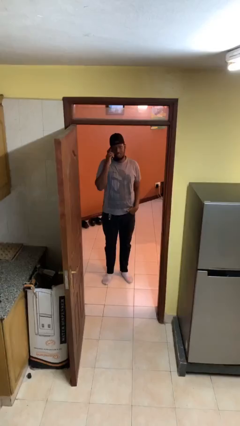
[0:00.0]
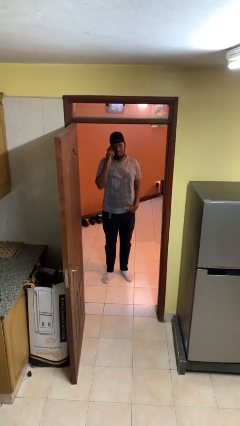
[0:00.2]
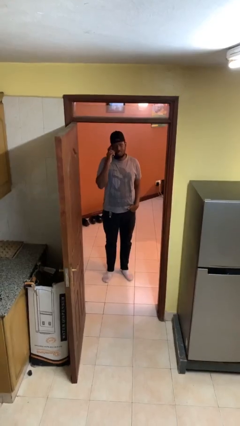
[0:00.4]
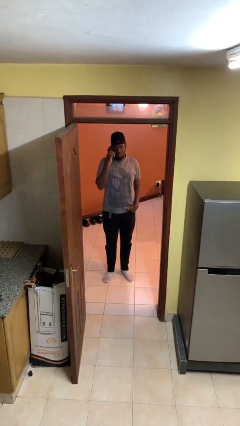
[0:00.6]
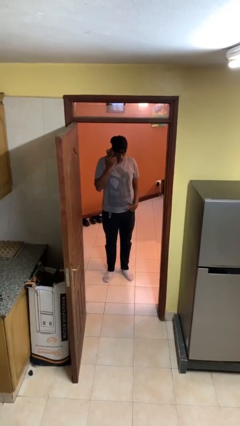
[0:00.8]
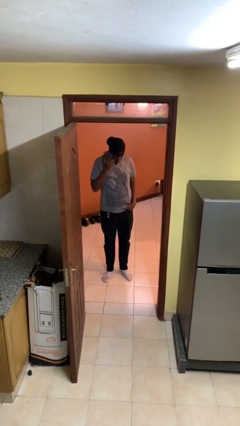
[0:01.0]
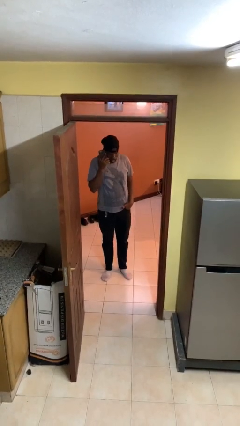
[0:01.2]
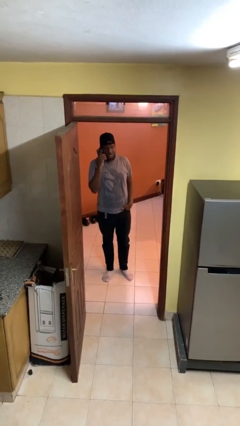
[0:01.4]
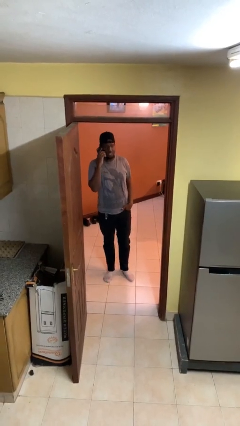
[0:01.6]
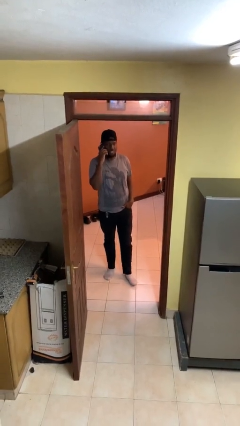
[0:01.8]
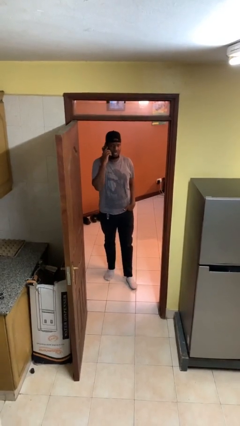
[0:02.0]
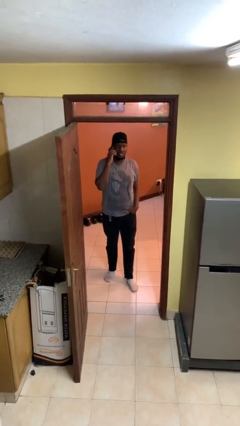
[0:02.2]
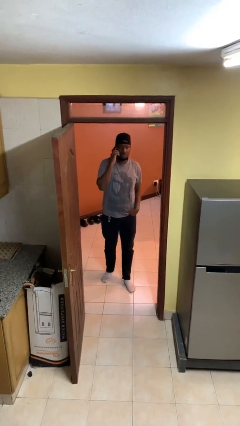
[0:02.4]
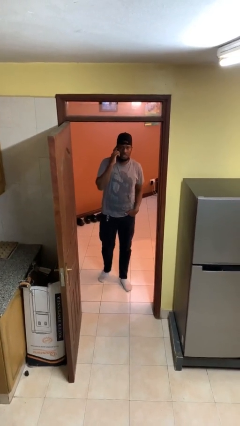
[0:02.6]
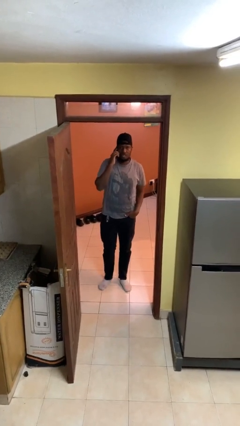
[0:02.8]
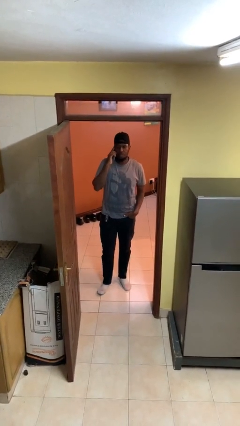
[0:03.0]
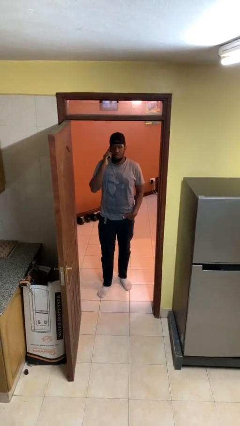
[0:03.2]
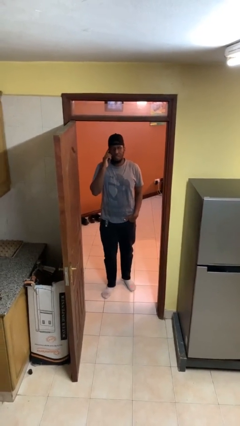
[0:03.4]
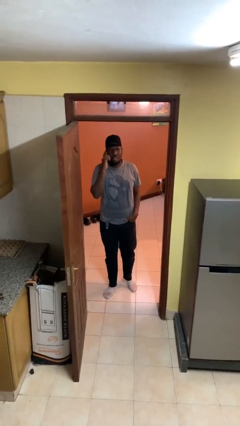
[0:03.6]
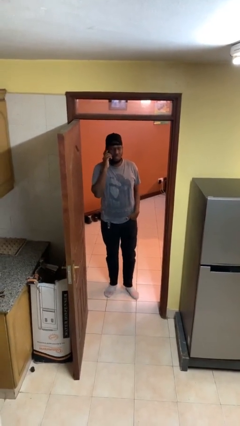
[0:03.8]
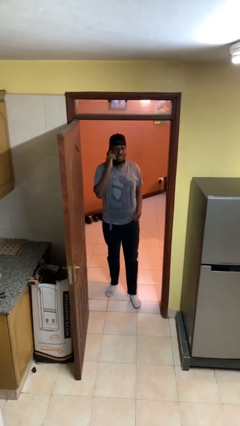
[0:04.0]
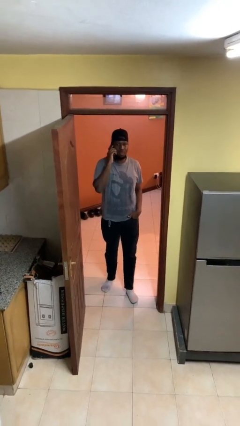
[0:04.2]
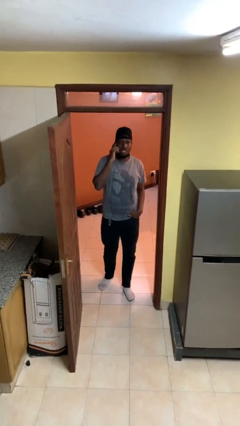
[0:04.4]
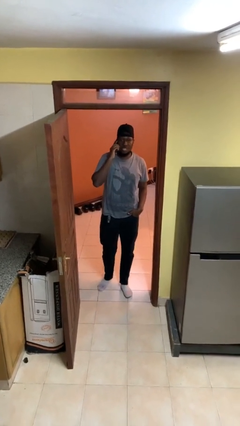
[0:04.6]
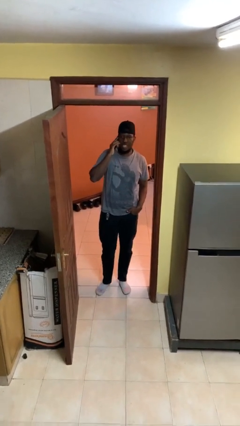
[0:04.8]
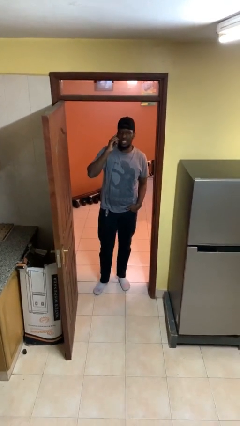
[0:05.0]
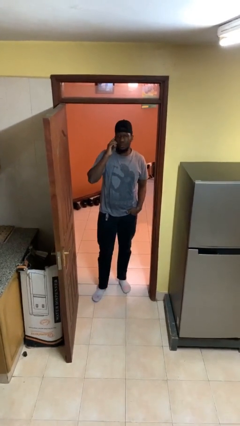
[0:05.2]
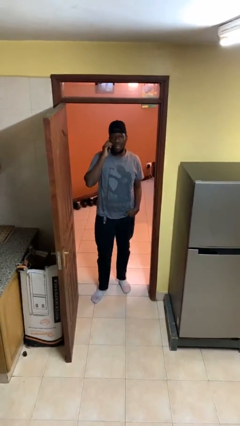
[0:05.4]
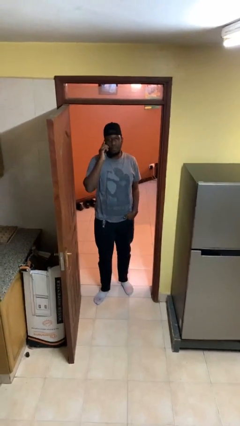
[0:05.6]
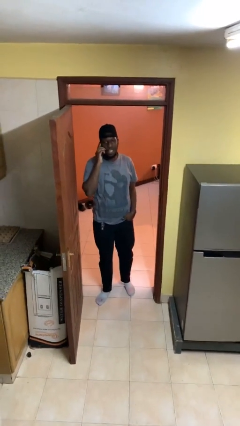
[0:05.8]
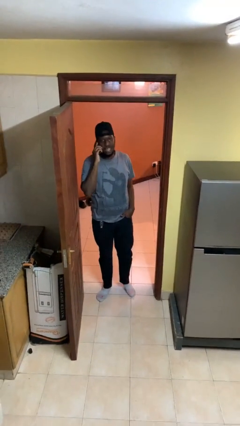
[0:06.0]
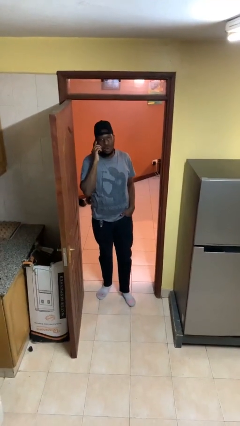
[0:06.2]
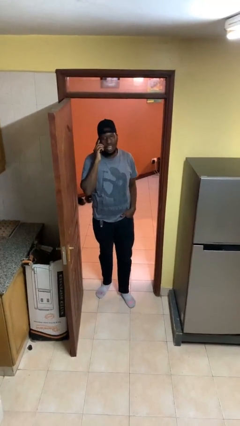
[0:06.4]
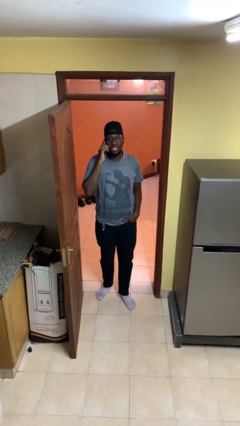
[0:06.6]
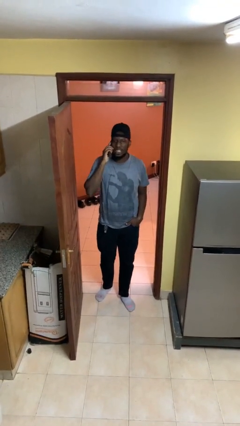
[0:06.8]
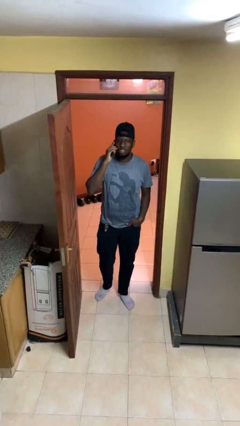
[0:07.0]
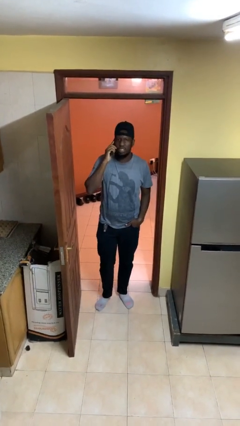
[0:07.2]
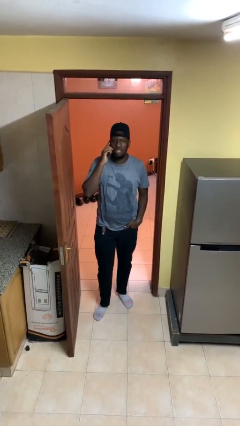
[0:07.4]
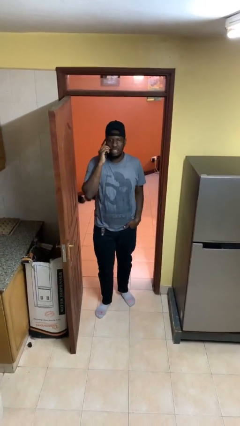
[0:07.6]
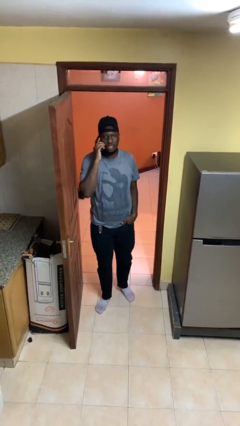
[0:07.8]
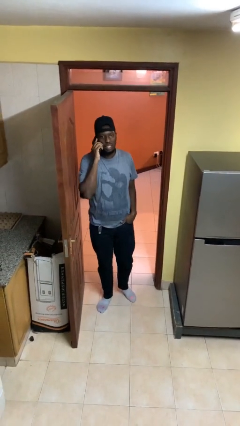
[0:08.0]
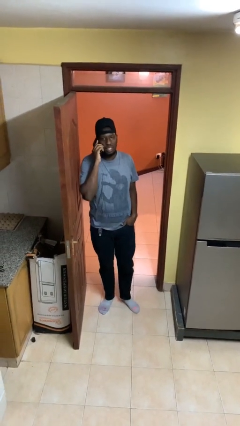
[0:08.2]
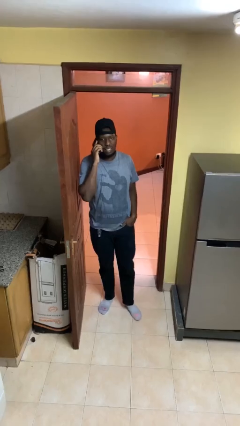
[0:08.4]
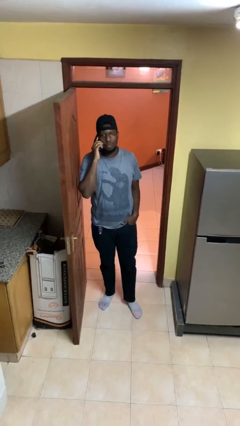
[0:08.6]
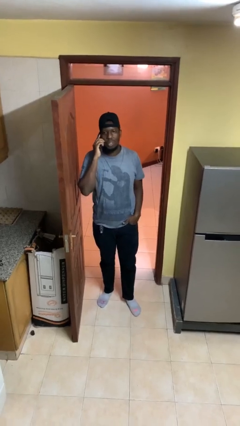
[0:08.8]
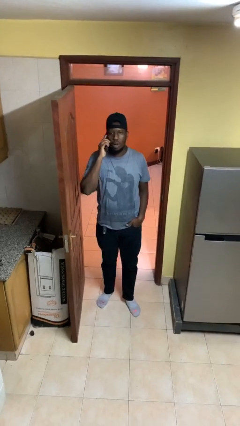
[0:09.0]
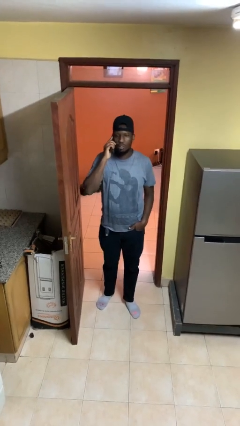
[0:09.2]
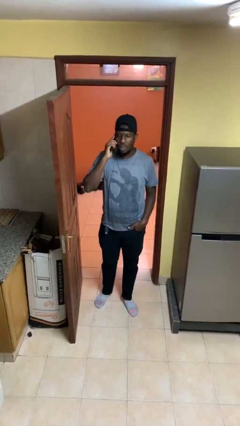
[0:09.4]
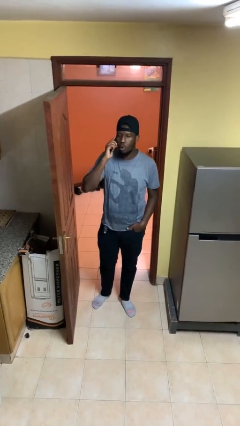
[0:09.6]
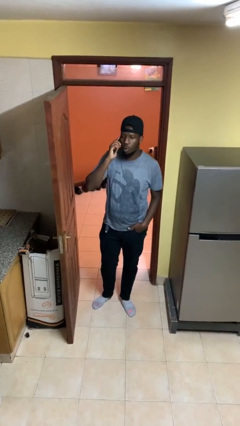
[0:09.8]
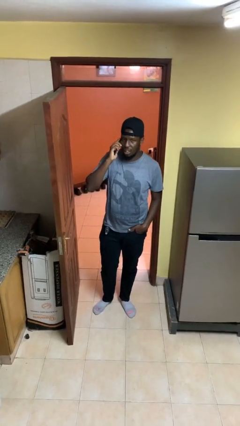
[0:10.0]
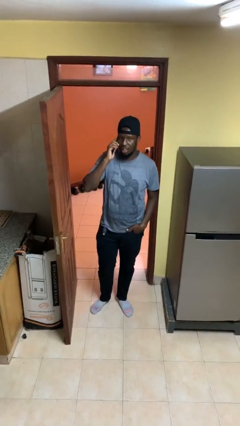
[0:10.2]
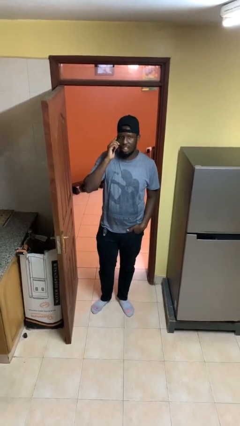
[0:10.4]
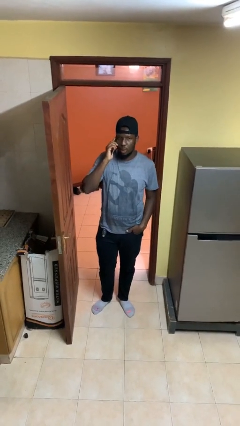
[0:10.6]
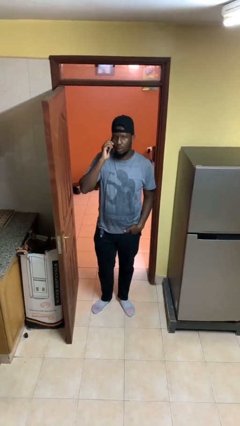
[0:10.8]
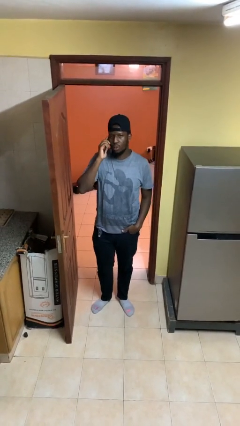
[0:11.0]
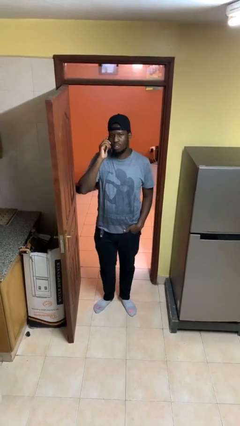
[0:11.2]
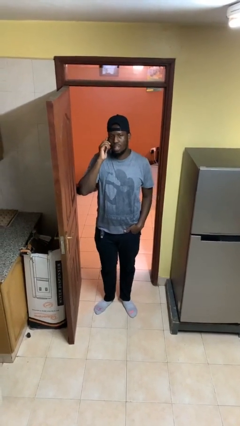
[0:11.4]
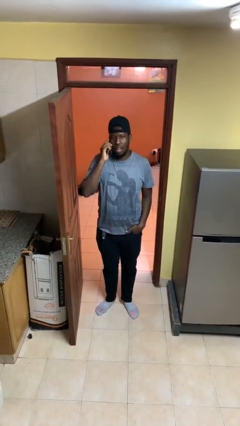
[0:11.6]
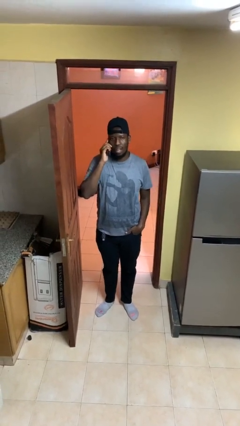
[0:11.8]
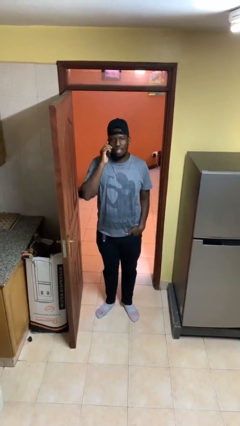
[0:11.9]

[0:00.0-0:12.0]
person enters scene through structure

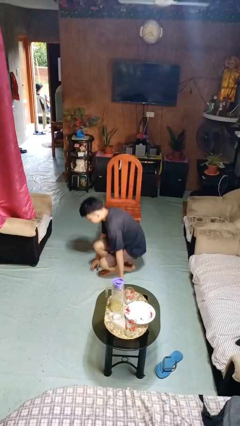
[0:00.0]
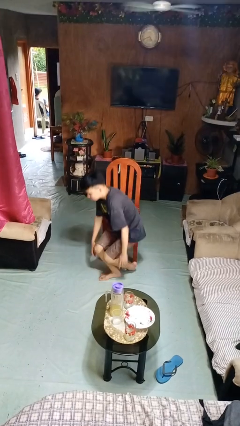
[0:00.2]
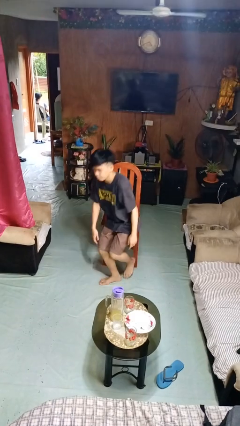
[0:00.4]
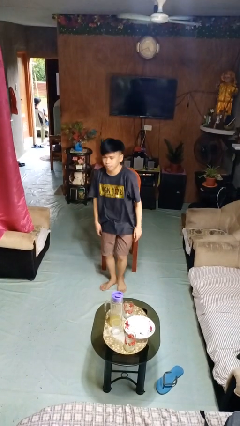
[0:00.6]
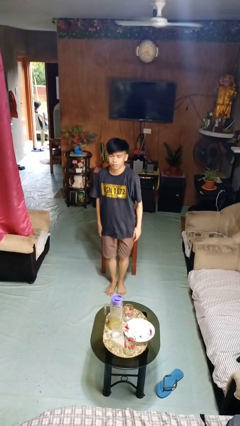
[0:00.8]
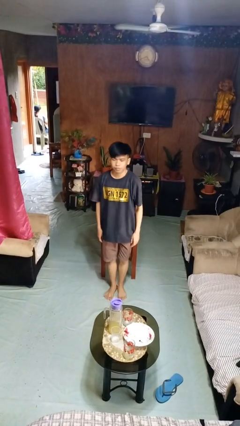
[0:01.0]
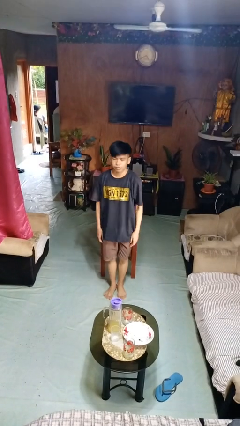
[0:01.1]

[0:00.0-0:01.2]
person stands up from floor

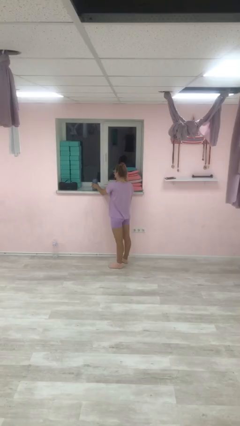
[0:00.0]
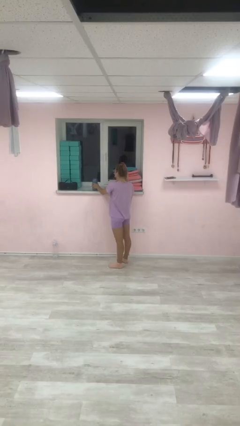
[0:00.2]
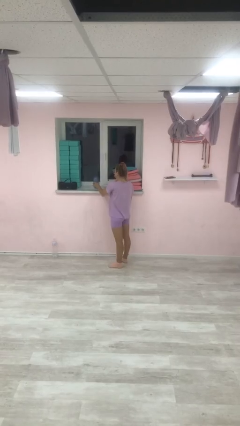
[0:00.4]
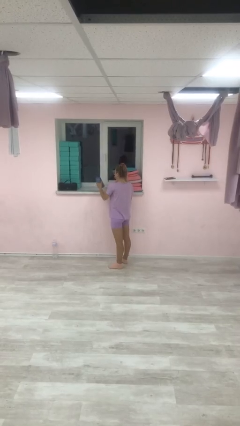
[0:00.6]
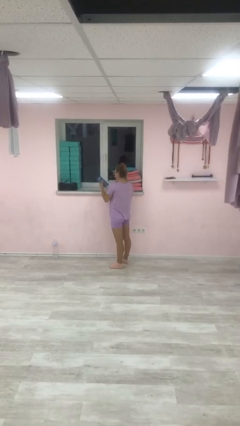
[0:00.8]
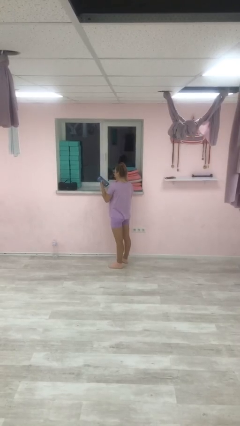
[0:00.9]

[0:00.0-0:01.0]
person picks up object from countertop

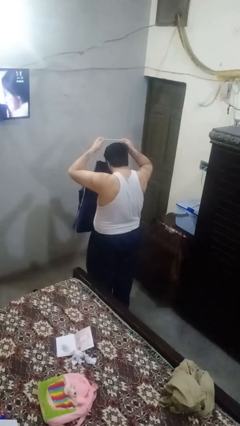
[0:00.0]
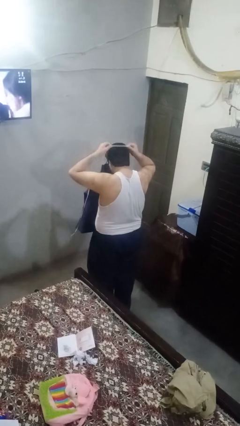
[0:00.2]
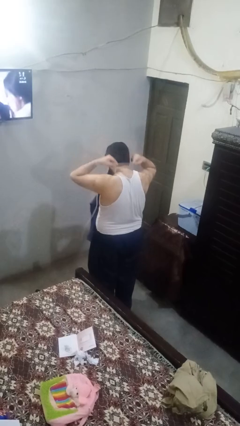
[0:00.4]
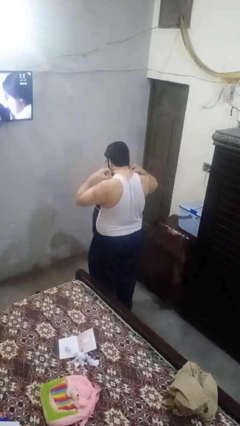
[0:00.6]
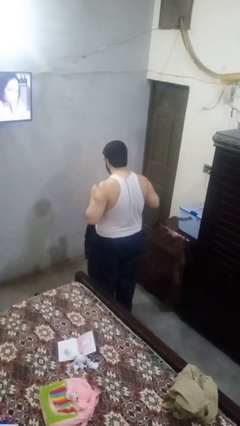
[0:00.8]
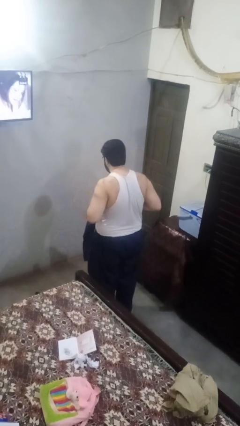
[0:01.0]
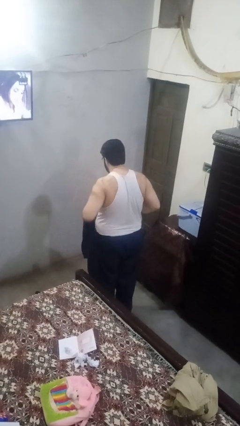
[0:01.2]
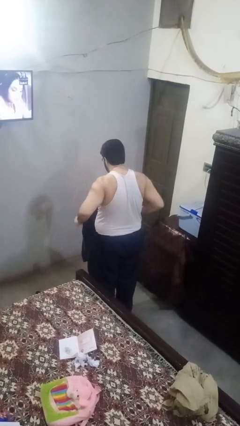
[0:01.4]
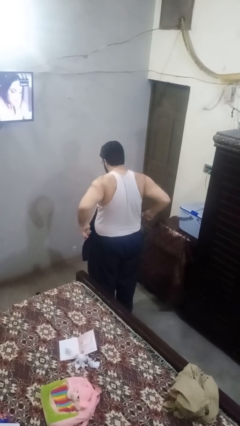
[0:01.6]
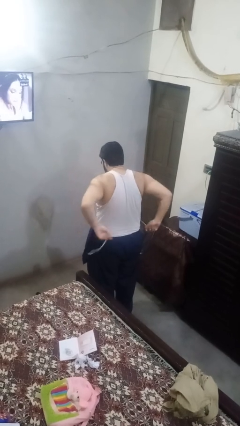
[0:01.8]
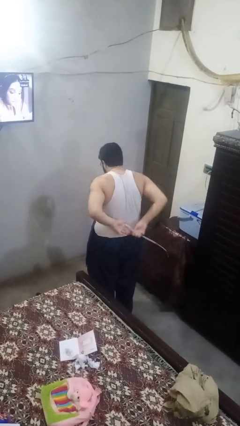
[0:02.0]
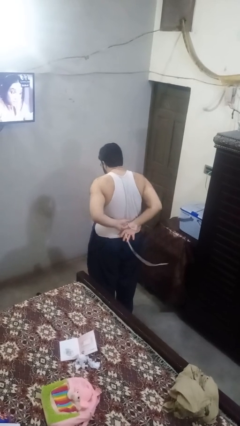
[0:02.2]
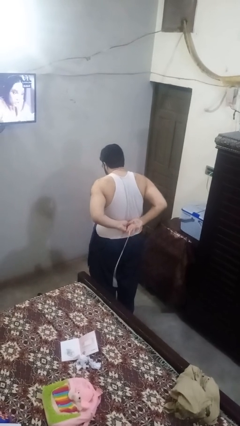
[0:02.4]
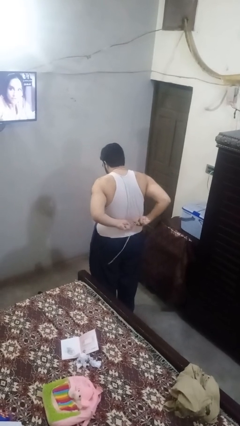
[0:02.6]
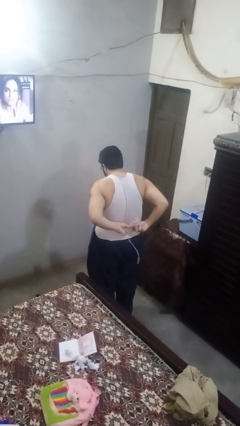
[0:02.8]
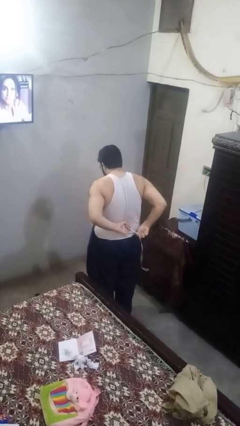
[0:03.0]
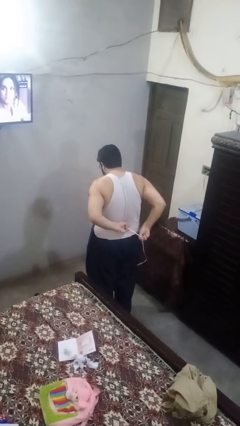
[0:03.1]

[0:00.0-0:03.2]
person puts on apron

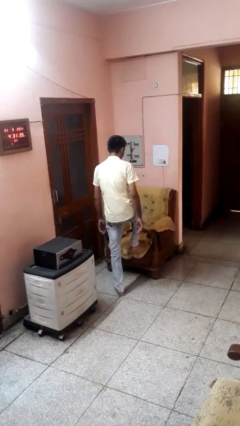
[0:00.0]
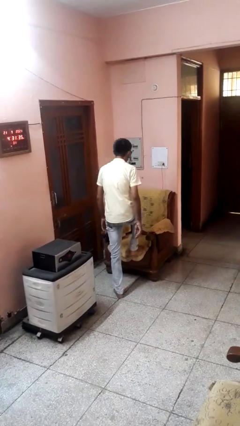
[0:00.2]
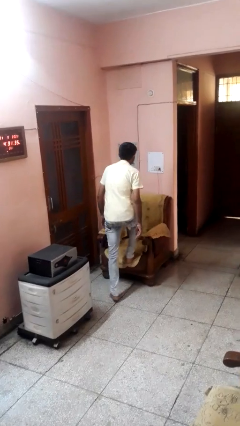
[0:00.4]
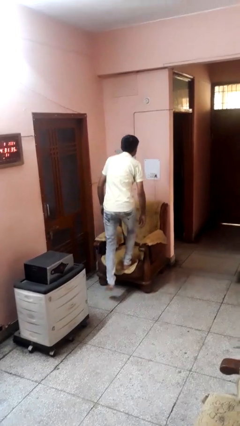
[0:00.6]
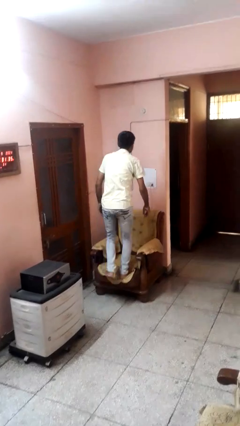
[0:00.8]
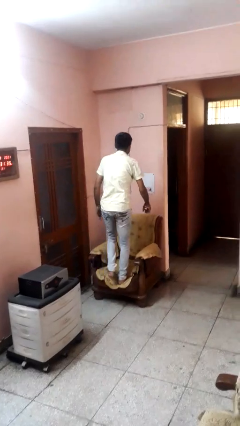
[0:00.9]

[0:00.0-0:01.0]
person climbs on couch
